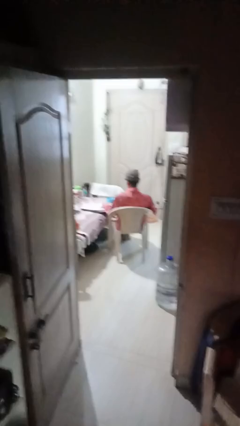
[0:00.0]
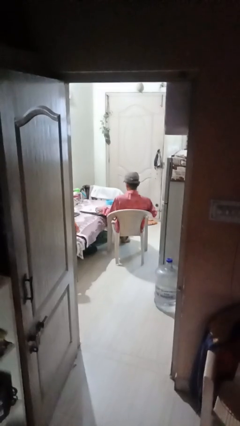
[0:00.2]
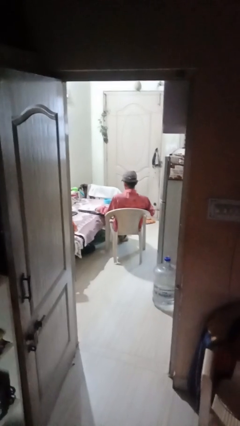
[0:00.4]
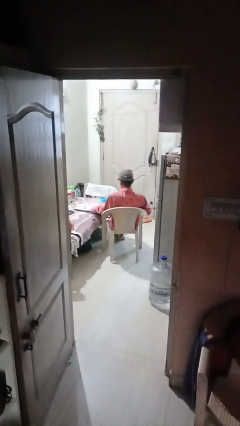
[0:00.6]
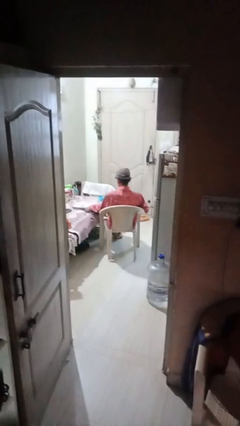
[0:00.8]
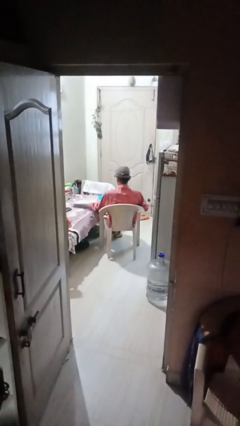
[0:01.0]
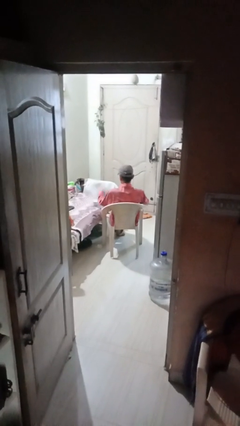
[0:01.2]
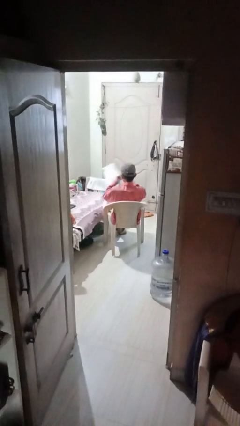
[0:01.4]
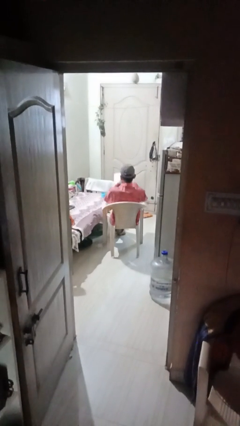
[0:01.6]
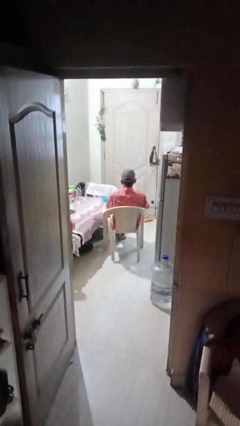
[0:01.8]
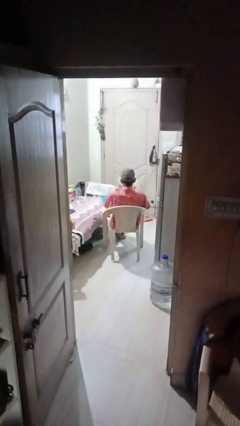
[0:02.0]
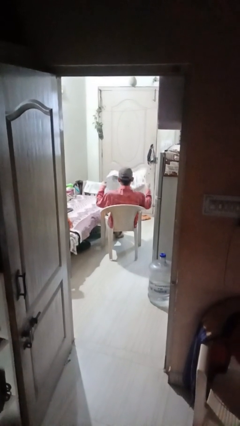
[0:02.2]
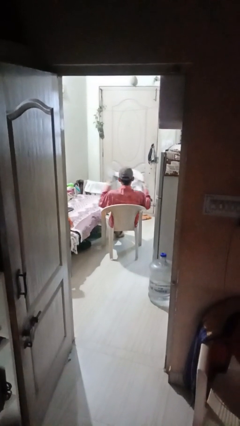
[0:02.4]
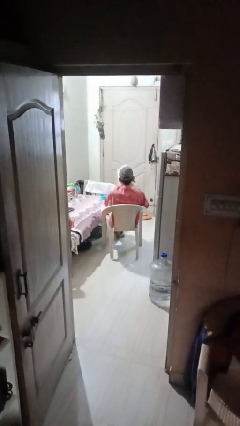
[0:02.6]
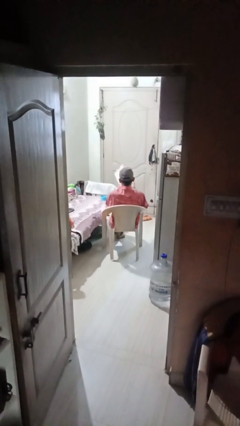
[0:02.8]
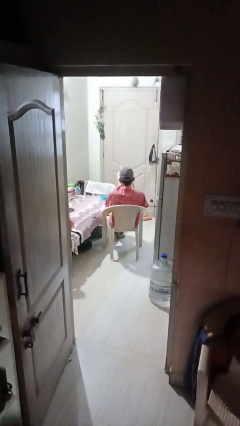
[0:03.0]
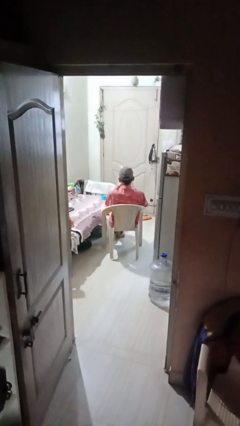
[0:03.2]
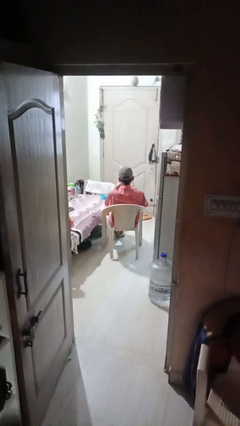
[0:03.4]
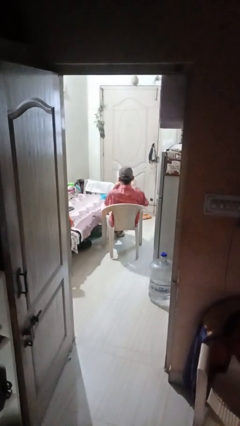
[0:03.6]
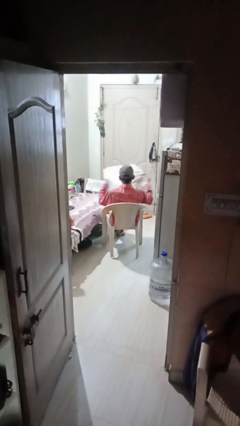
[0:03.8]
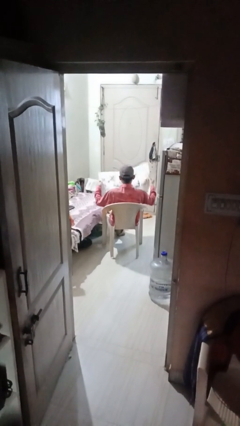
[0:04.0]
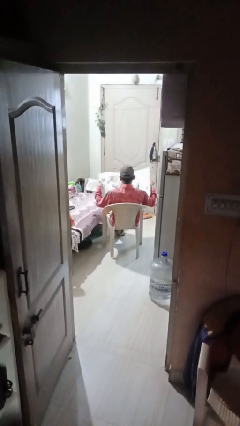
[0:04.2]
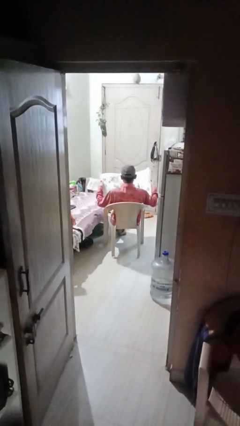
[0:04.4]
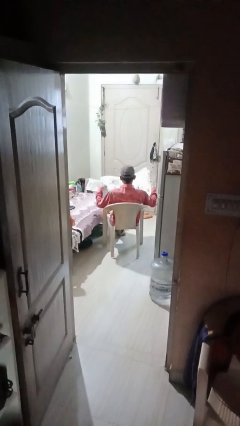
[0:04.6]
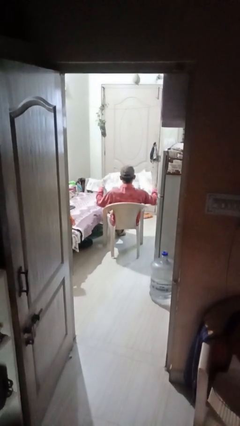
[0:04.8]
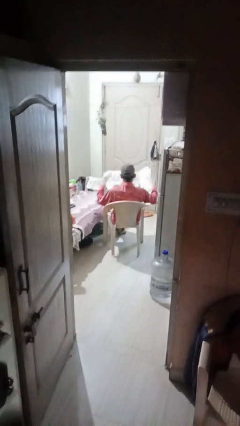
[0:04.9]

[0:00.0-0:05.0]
person reads newspaper

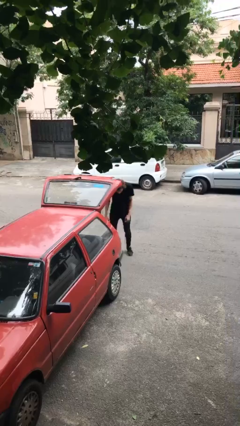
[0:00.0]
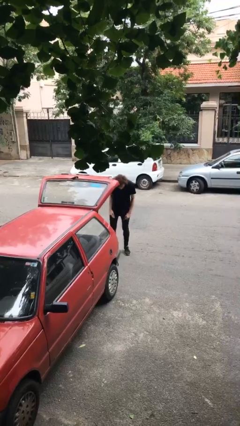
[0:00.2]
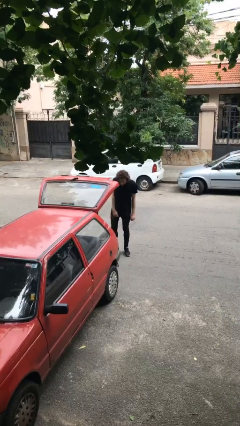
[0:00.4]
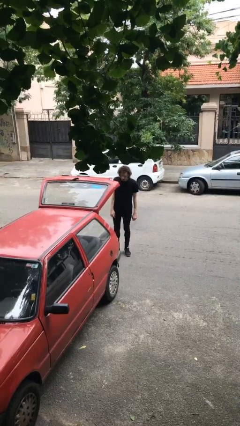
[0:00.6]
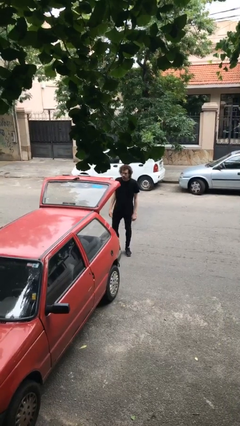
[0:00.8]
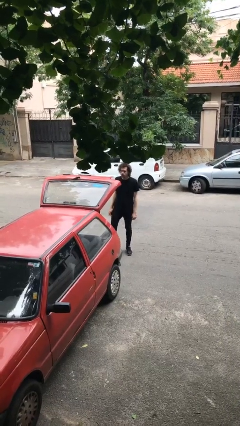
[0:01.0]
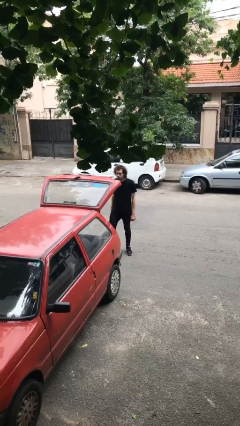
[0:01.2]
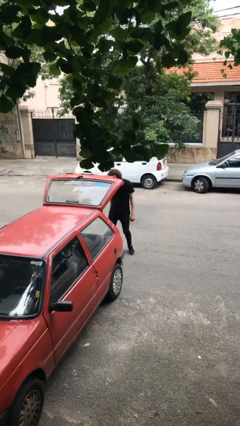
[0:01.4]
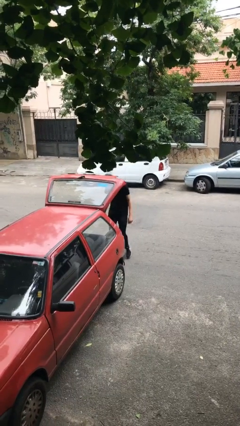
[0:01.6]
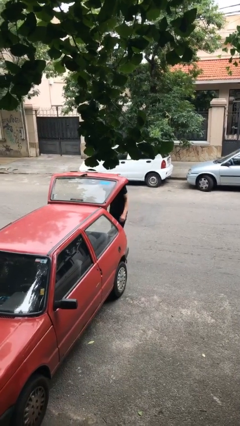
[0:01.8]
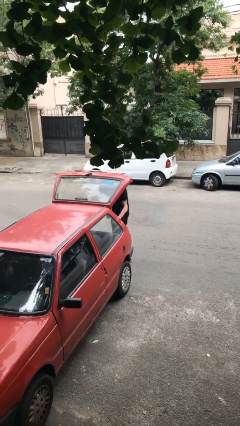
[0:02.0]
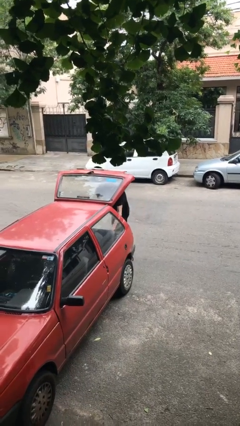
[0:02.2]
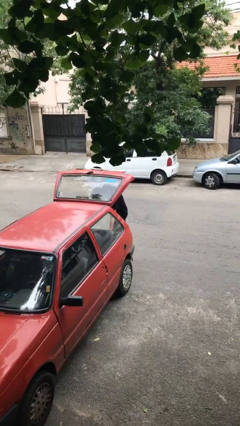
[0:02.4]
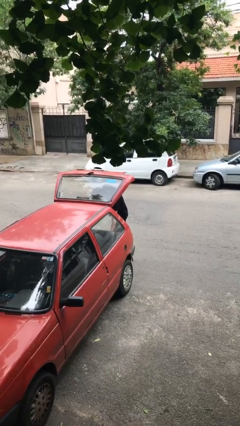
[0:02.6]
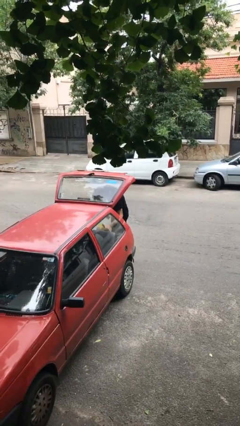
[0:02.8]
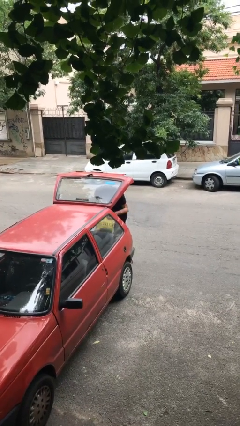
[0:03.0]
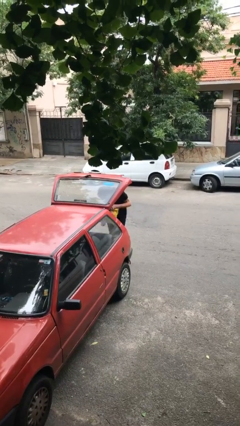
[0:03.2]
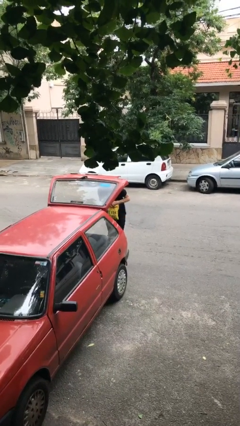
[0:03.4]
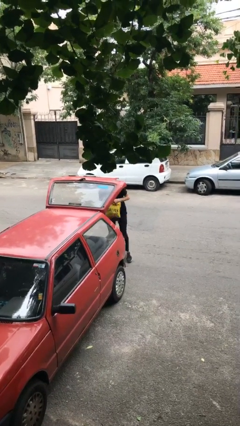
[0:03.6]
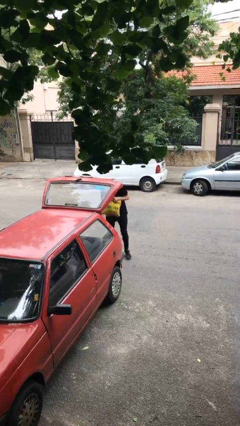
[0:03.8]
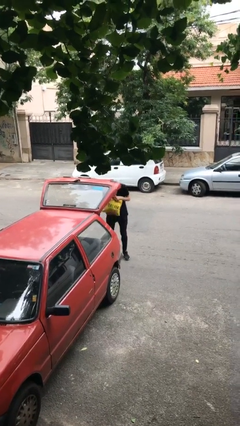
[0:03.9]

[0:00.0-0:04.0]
person unloads car

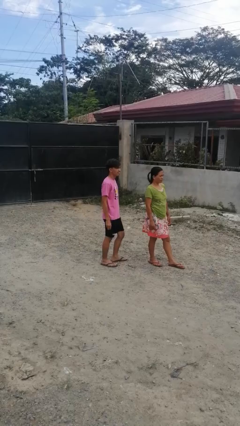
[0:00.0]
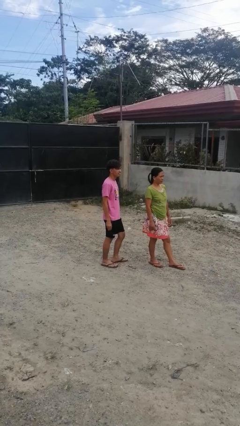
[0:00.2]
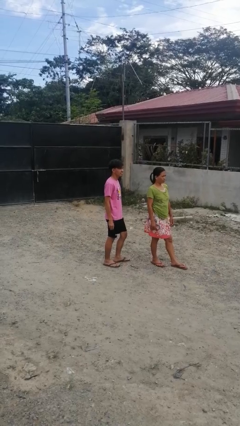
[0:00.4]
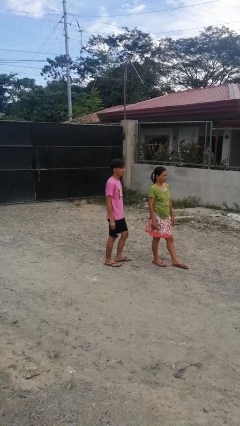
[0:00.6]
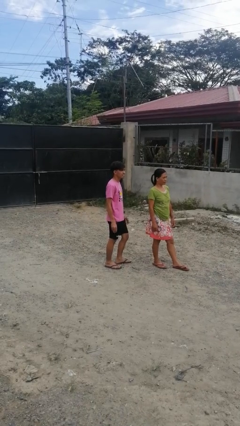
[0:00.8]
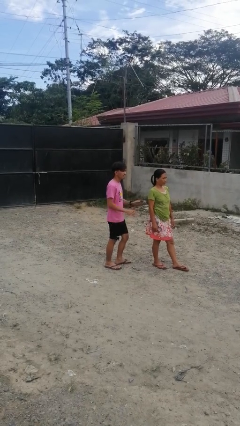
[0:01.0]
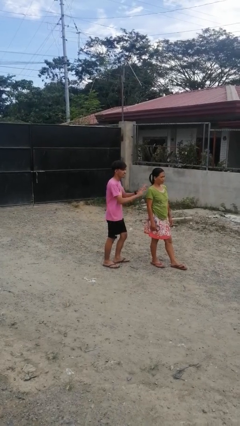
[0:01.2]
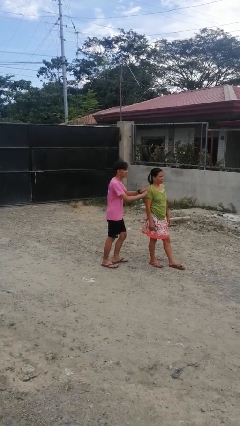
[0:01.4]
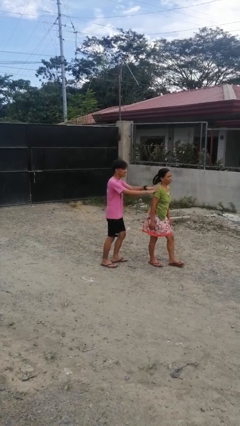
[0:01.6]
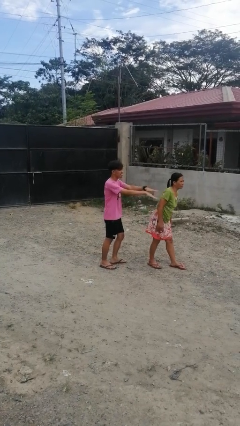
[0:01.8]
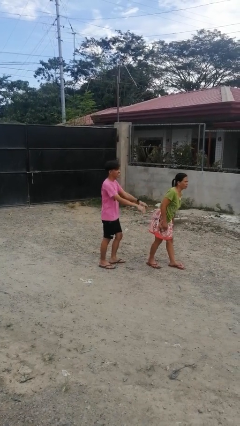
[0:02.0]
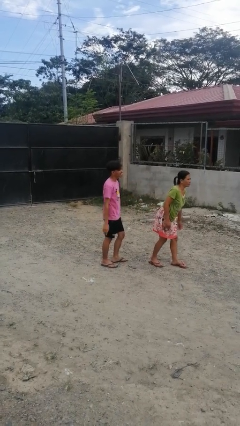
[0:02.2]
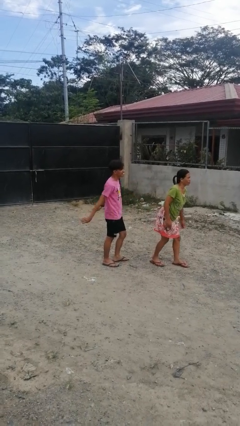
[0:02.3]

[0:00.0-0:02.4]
person shoves person

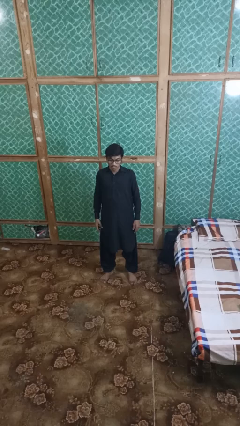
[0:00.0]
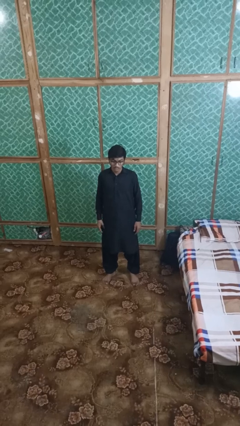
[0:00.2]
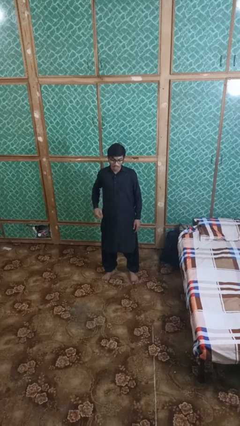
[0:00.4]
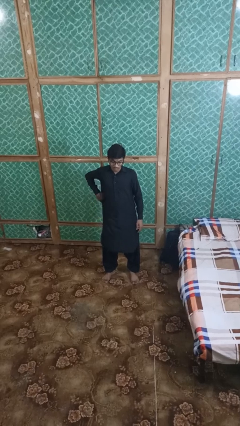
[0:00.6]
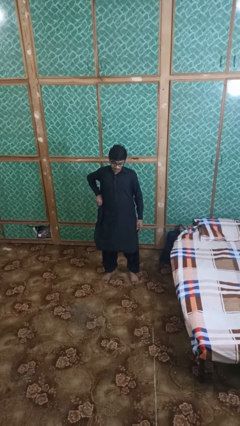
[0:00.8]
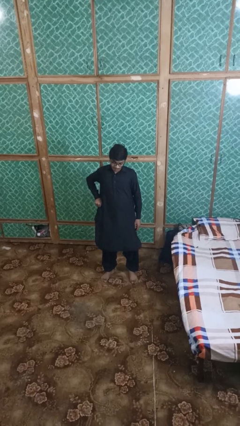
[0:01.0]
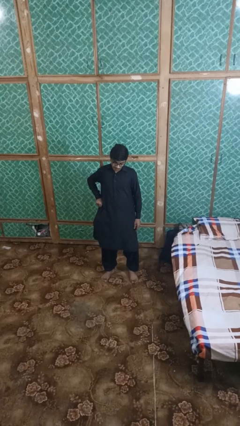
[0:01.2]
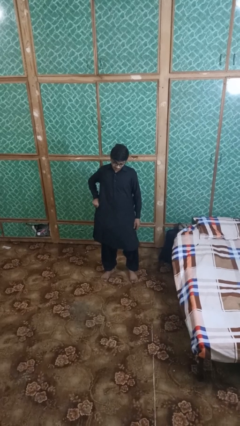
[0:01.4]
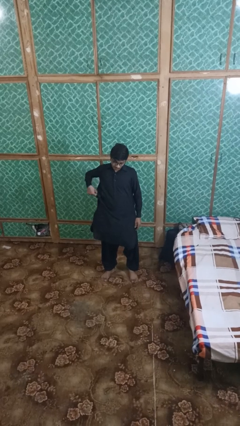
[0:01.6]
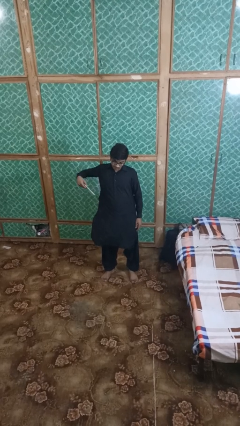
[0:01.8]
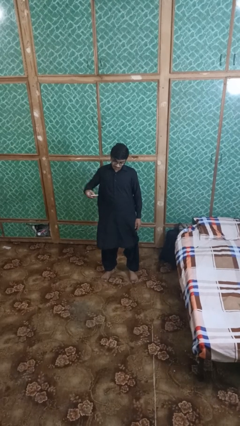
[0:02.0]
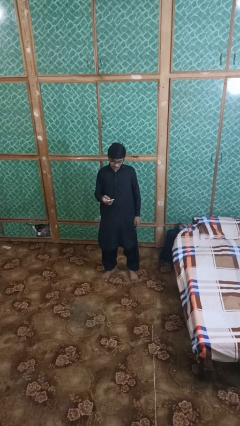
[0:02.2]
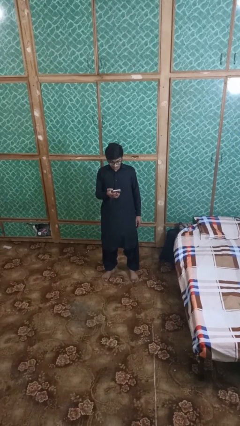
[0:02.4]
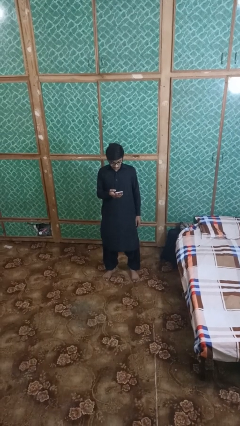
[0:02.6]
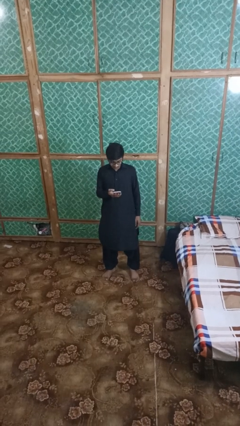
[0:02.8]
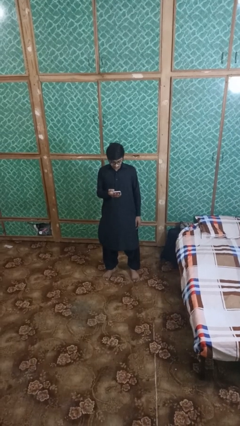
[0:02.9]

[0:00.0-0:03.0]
person takes phone from pocket

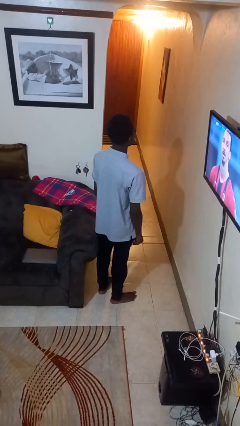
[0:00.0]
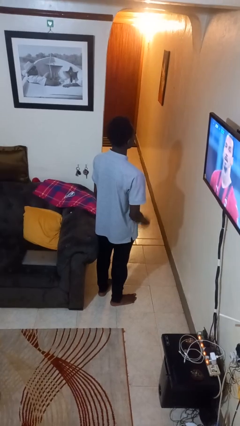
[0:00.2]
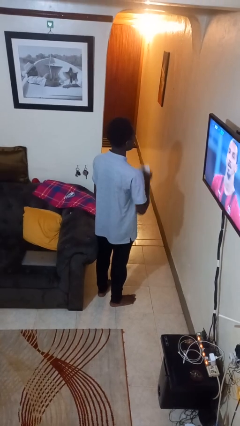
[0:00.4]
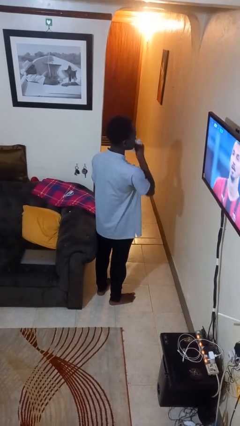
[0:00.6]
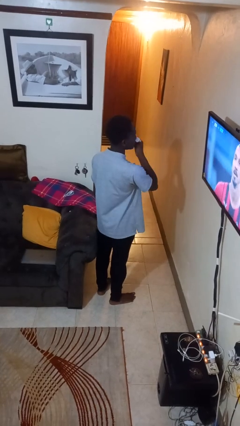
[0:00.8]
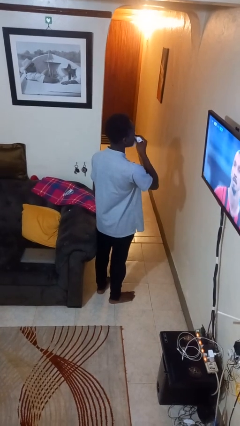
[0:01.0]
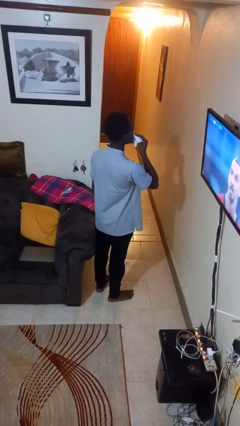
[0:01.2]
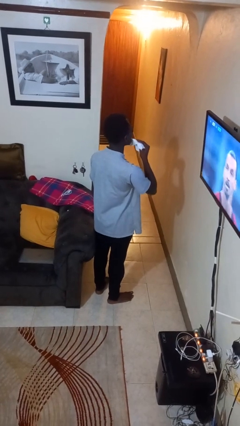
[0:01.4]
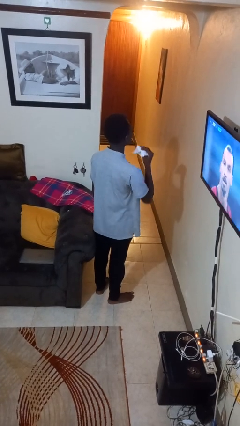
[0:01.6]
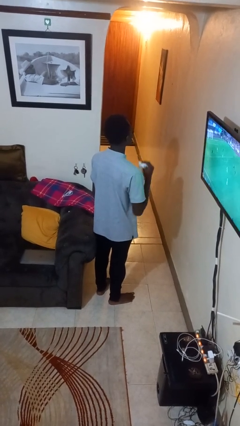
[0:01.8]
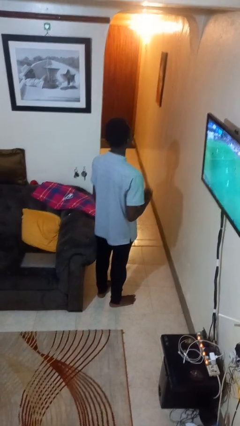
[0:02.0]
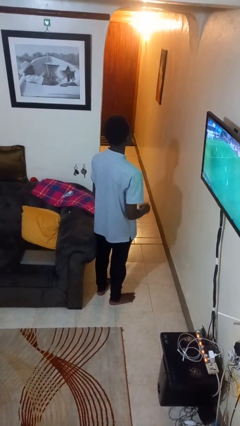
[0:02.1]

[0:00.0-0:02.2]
person wipes mouth with napkin

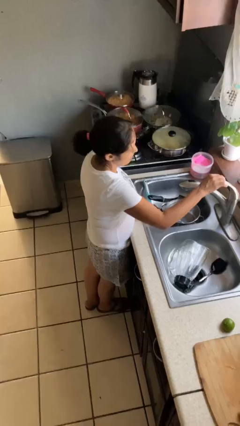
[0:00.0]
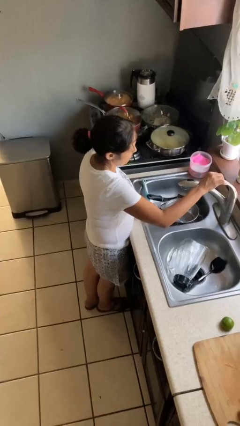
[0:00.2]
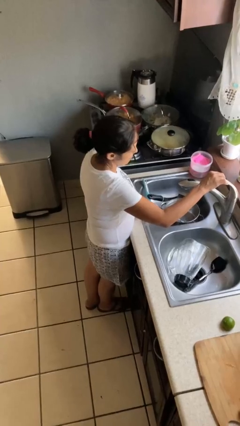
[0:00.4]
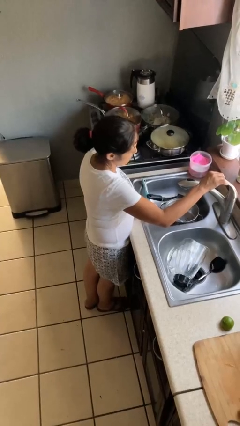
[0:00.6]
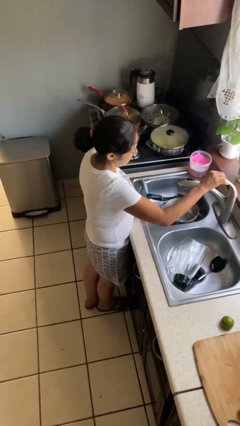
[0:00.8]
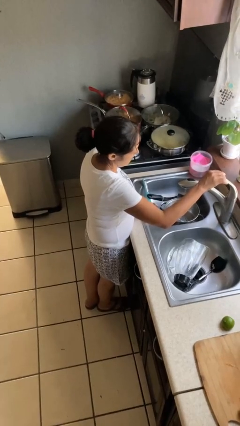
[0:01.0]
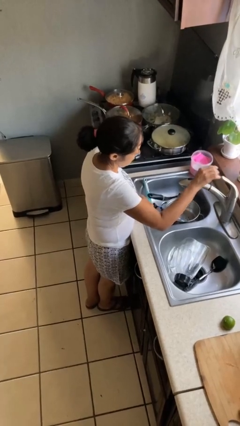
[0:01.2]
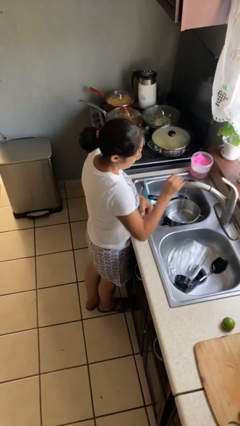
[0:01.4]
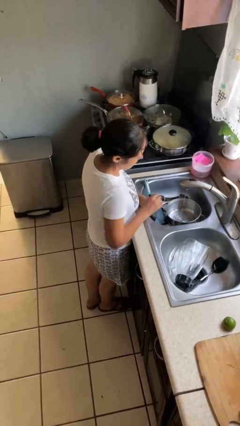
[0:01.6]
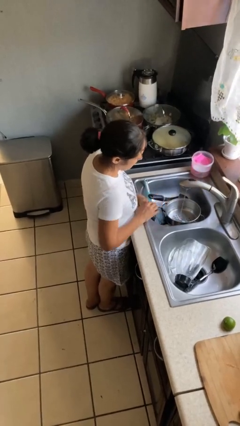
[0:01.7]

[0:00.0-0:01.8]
person turns on faucet
